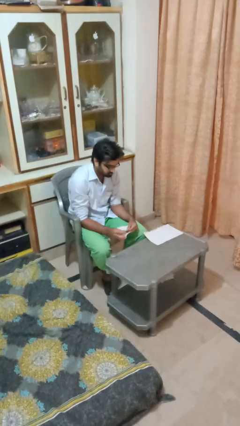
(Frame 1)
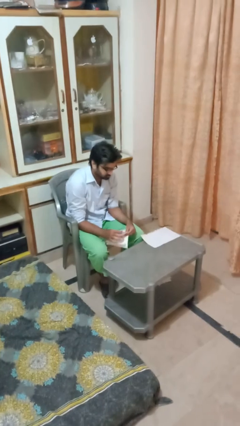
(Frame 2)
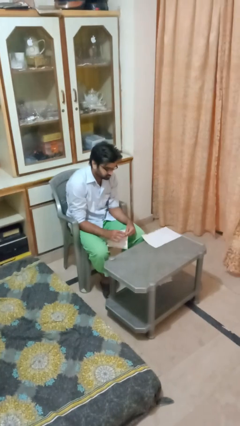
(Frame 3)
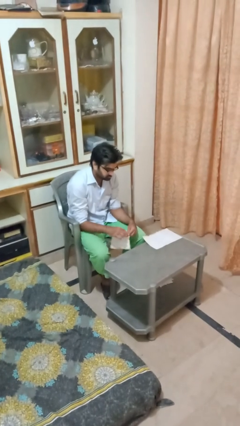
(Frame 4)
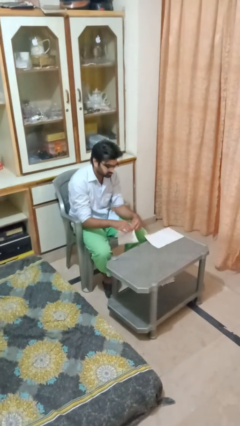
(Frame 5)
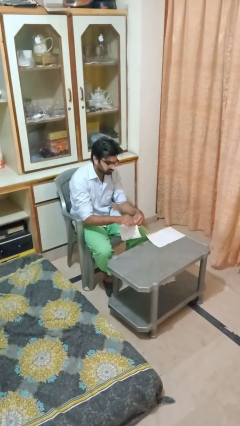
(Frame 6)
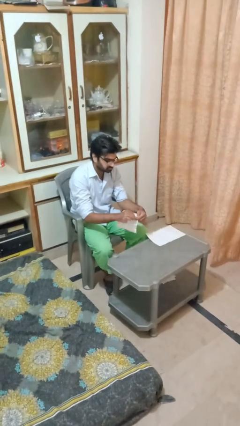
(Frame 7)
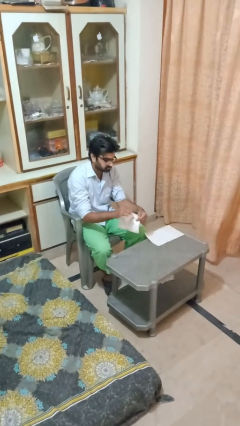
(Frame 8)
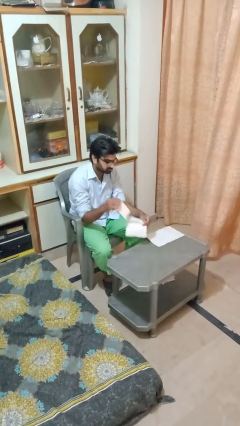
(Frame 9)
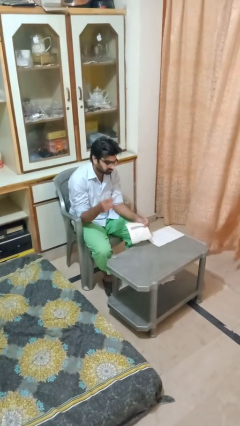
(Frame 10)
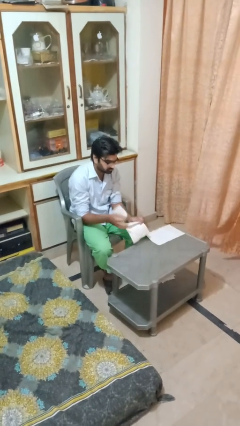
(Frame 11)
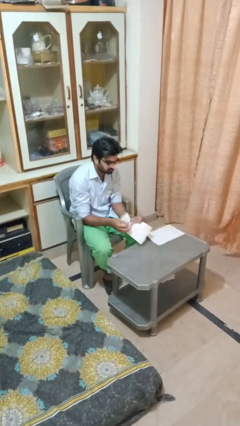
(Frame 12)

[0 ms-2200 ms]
person tears paper

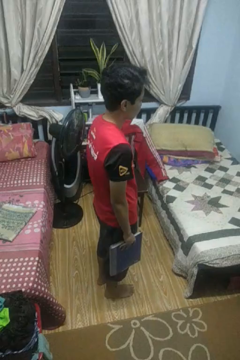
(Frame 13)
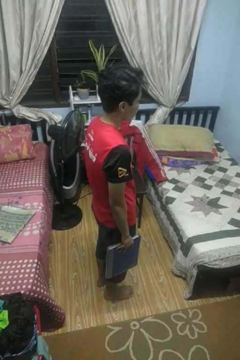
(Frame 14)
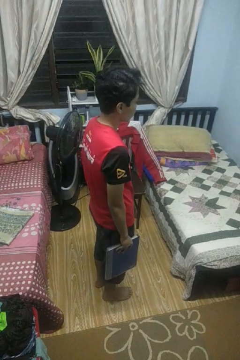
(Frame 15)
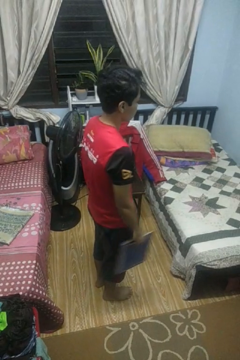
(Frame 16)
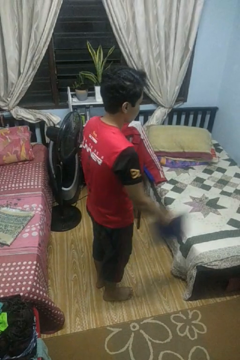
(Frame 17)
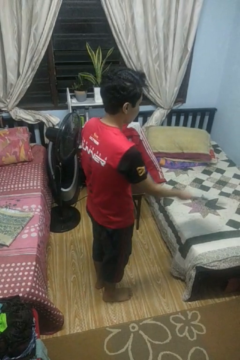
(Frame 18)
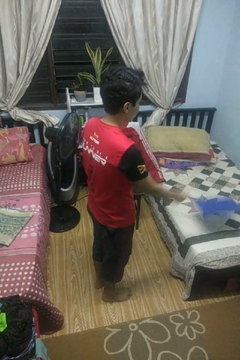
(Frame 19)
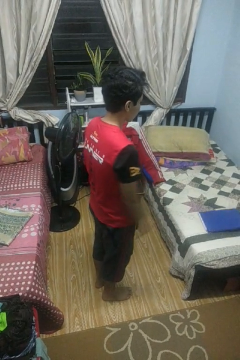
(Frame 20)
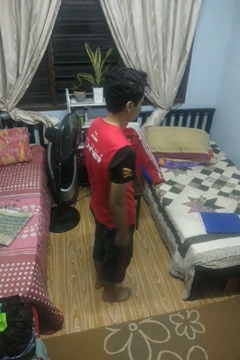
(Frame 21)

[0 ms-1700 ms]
person throws object on bed

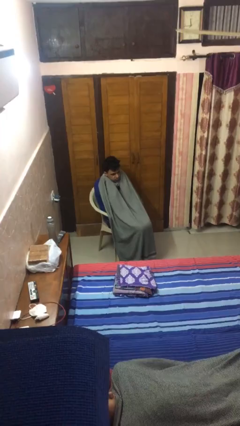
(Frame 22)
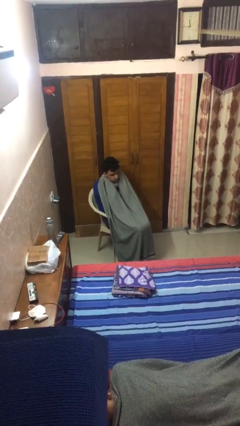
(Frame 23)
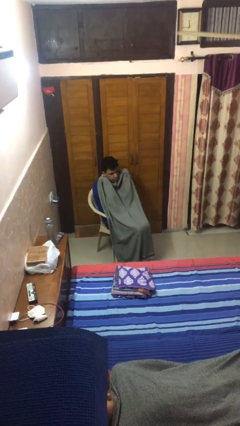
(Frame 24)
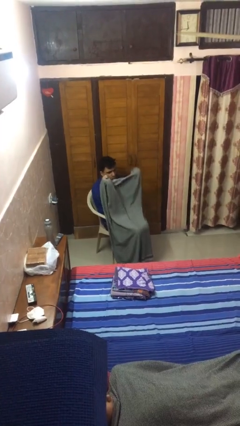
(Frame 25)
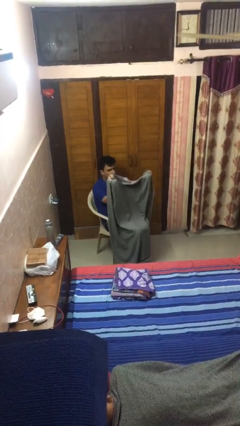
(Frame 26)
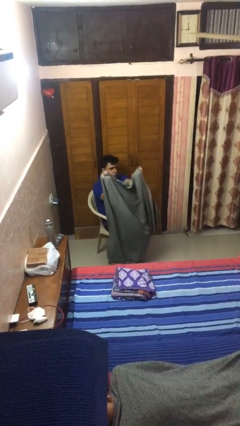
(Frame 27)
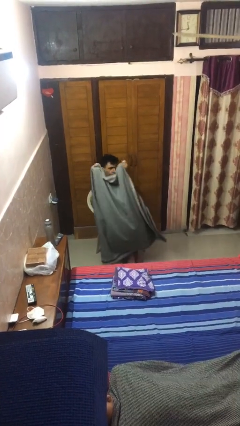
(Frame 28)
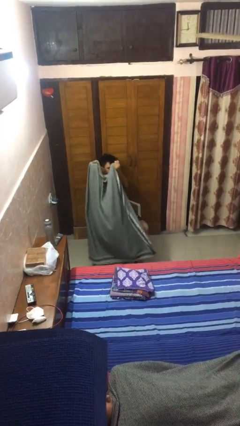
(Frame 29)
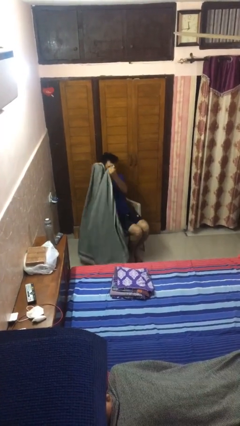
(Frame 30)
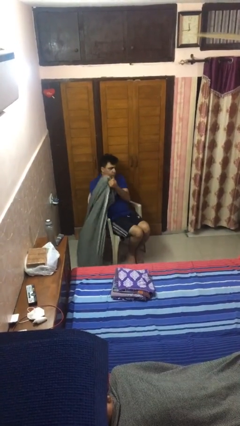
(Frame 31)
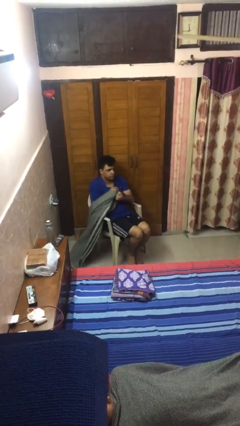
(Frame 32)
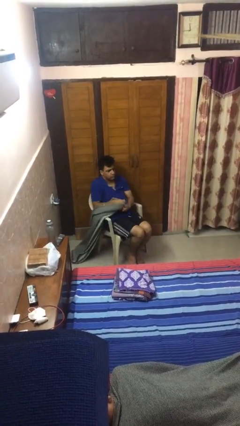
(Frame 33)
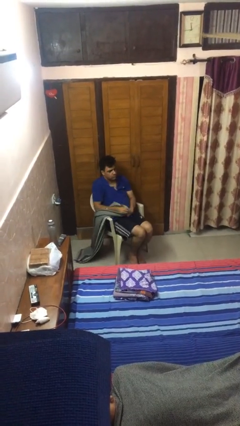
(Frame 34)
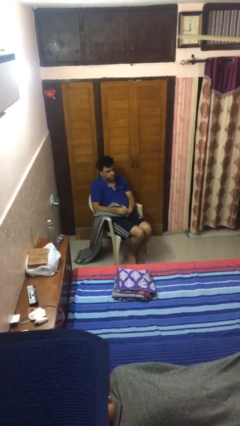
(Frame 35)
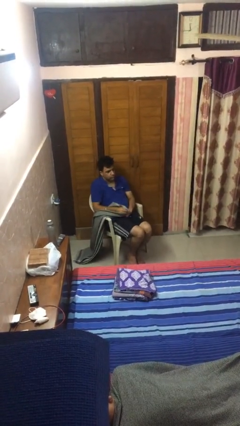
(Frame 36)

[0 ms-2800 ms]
person uncovers with blanket

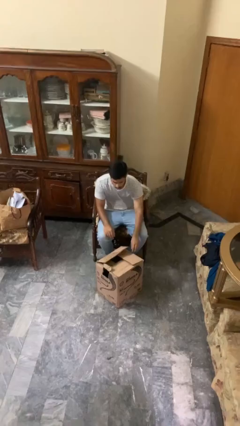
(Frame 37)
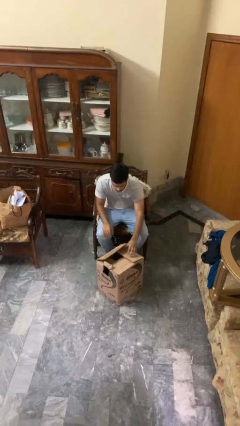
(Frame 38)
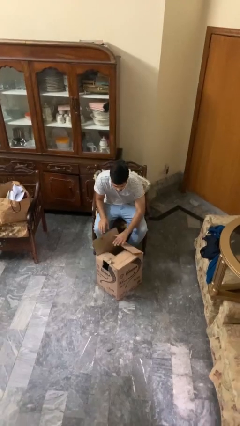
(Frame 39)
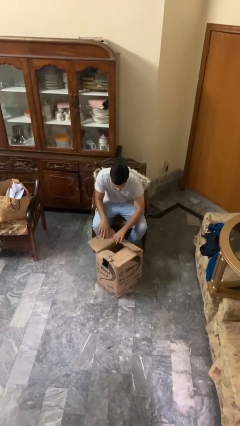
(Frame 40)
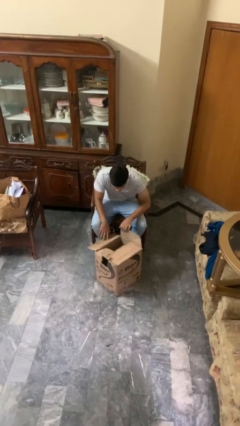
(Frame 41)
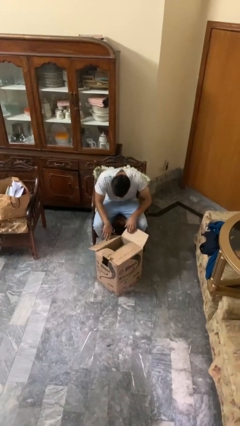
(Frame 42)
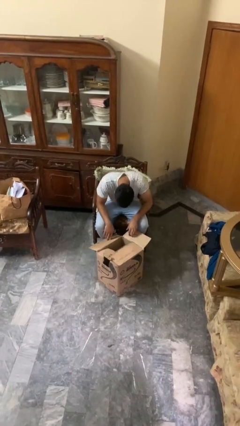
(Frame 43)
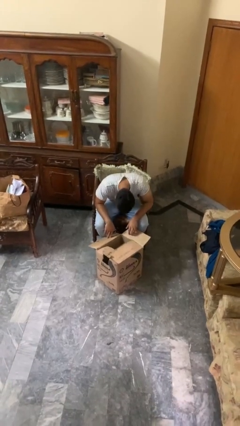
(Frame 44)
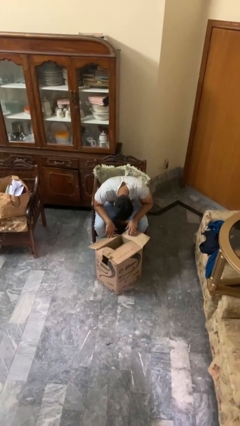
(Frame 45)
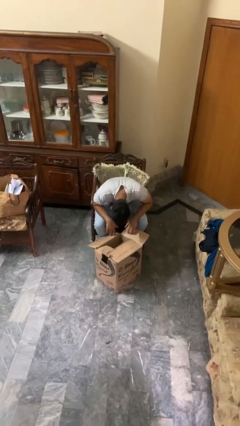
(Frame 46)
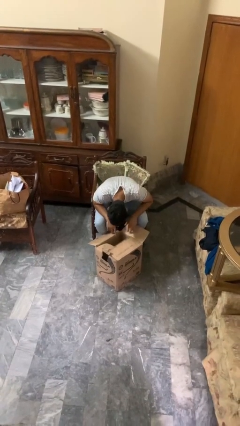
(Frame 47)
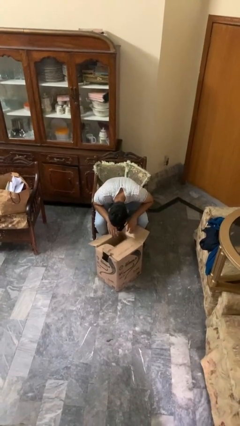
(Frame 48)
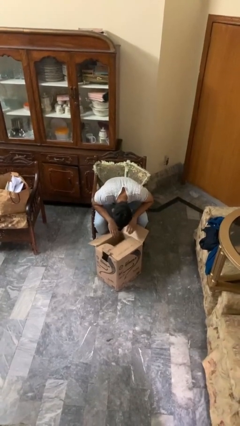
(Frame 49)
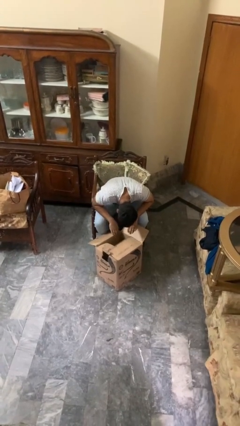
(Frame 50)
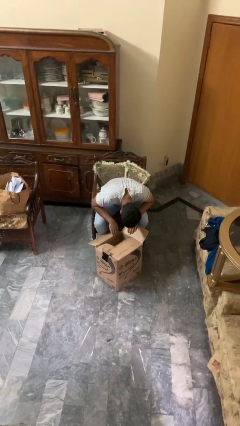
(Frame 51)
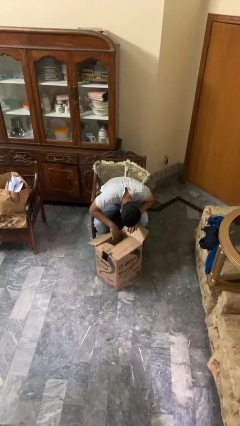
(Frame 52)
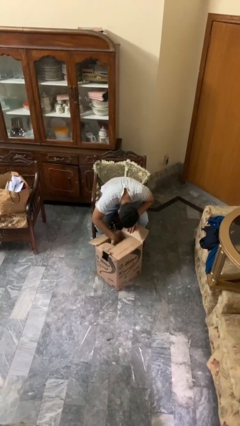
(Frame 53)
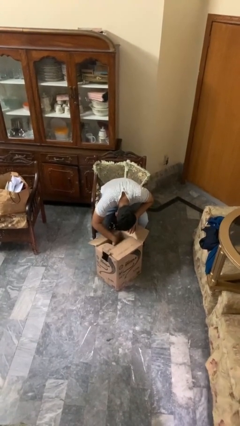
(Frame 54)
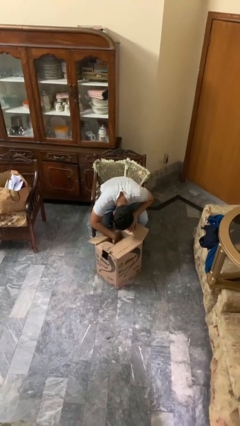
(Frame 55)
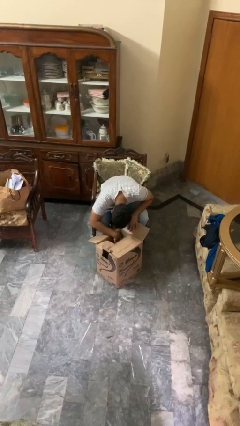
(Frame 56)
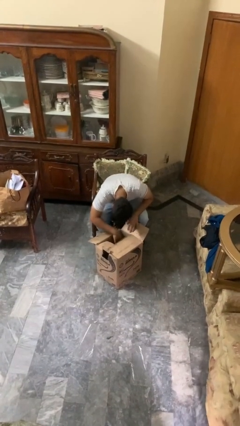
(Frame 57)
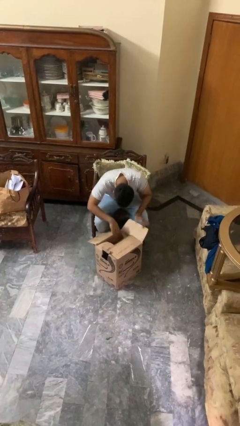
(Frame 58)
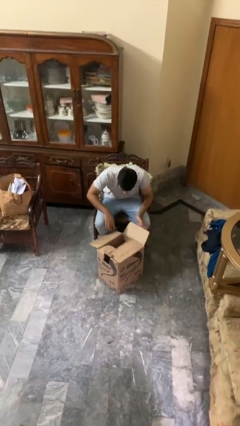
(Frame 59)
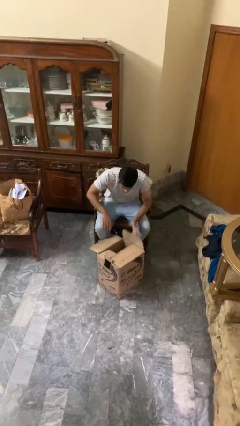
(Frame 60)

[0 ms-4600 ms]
person searches in box

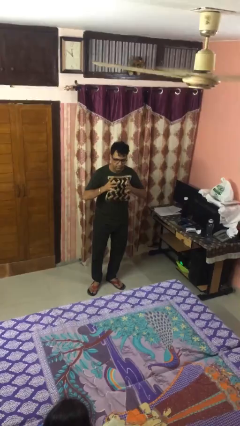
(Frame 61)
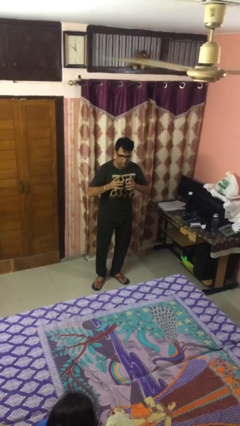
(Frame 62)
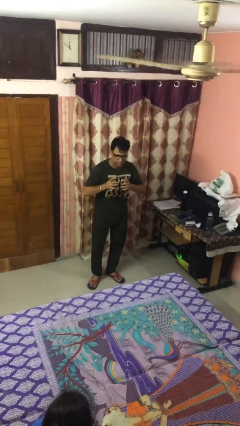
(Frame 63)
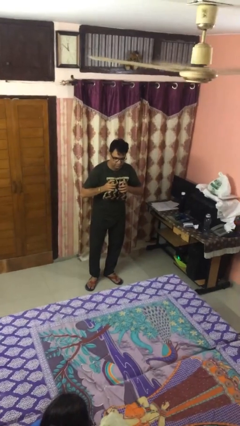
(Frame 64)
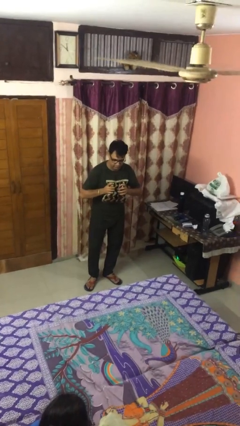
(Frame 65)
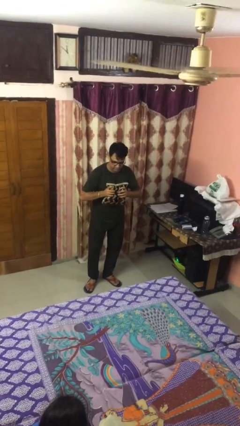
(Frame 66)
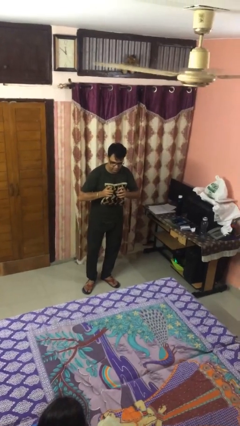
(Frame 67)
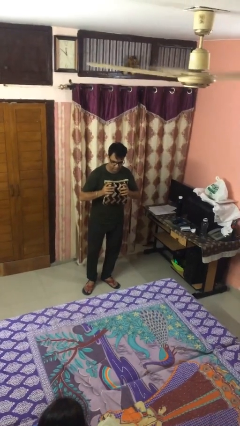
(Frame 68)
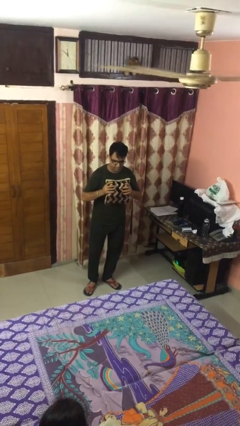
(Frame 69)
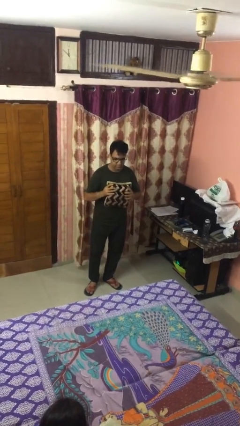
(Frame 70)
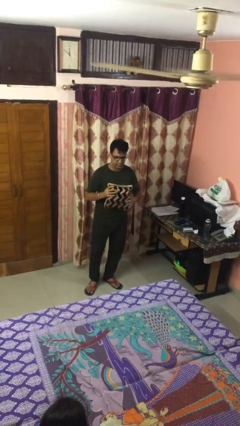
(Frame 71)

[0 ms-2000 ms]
person squeezes object

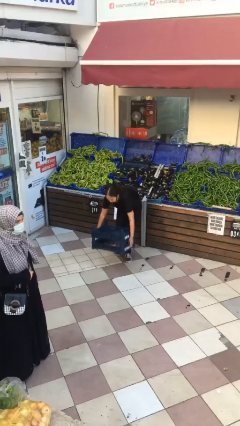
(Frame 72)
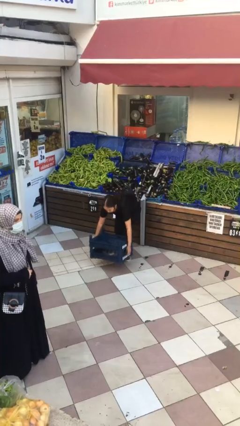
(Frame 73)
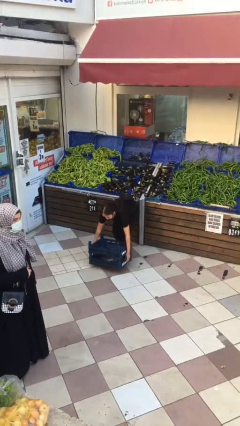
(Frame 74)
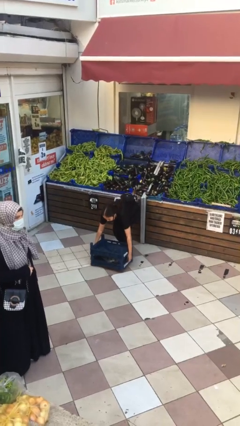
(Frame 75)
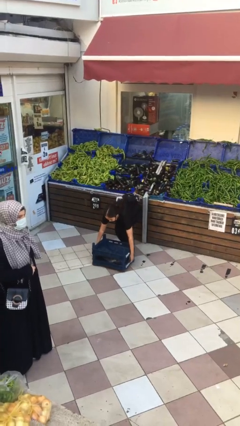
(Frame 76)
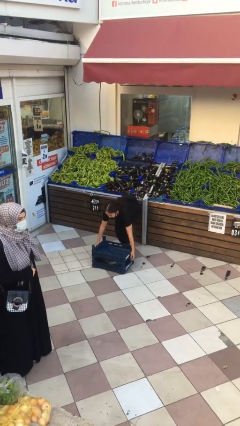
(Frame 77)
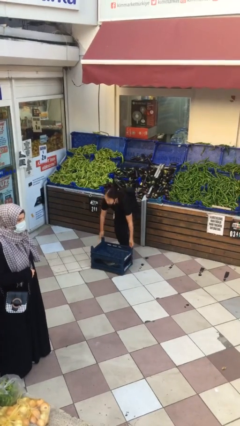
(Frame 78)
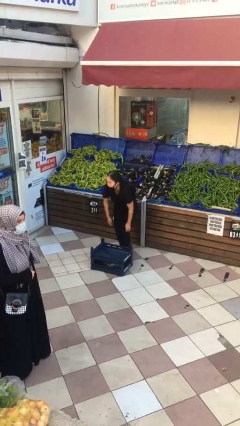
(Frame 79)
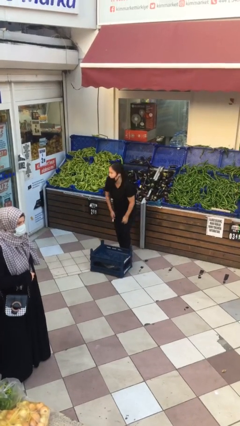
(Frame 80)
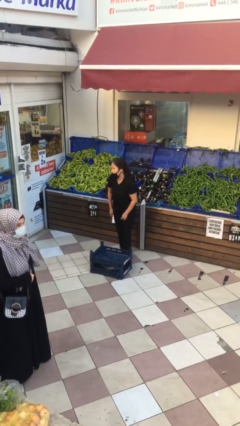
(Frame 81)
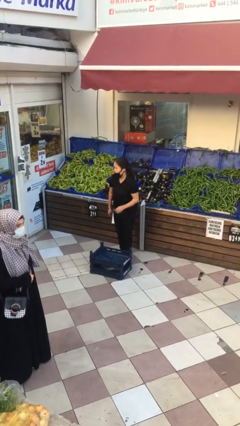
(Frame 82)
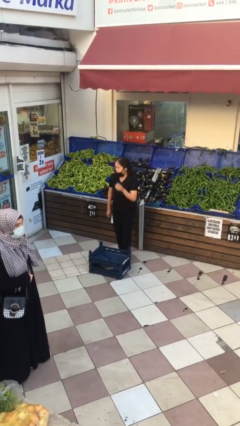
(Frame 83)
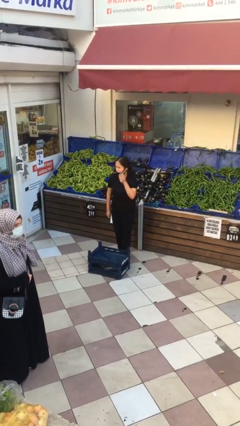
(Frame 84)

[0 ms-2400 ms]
person puts down object on floor

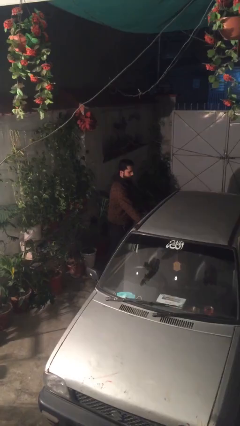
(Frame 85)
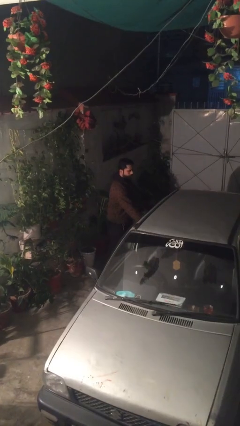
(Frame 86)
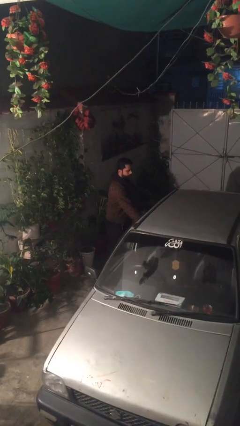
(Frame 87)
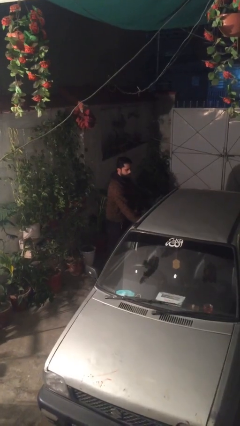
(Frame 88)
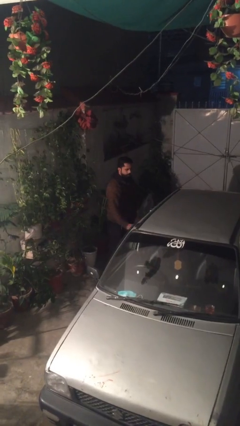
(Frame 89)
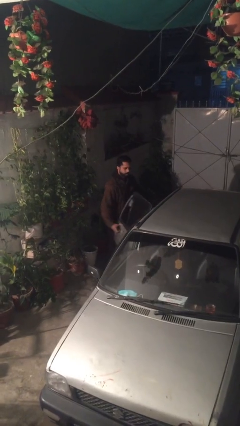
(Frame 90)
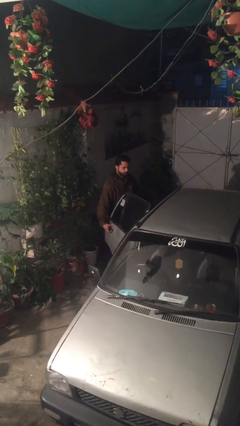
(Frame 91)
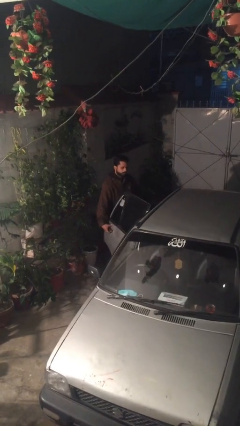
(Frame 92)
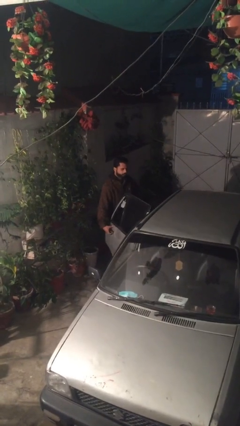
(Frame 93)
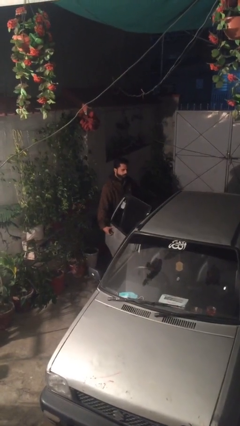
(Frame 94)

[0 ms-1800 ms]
person opens car door
